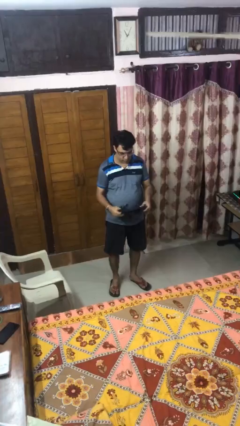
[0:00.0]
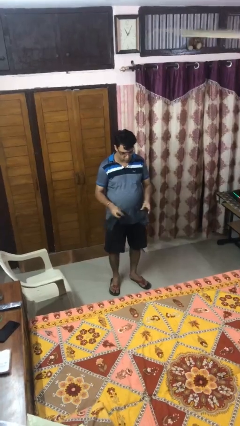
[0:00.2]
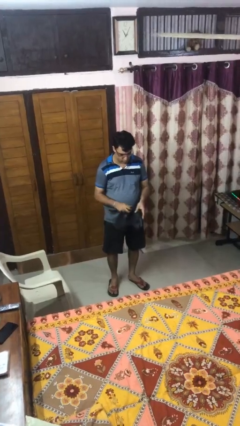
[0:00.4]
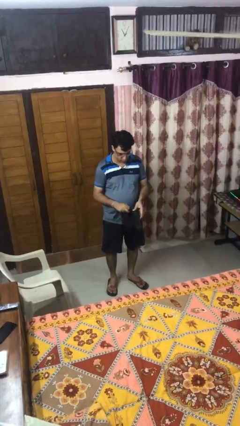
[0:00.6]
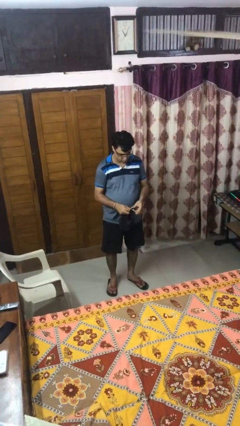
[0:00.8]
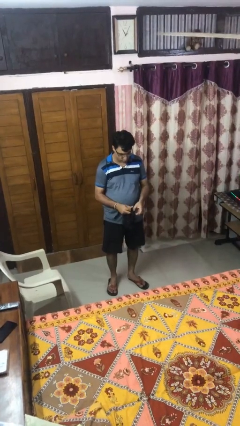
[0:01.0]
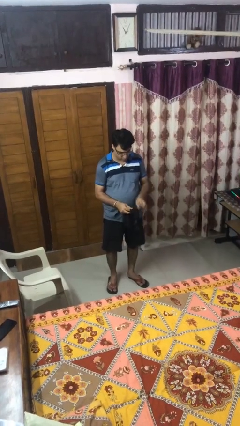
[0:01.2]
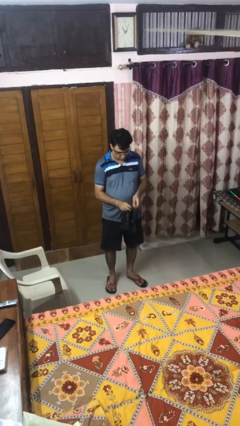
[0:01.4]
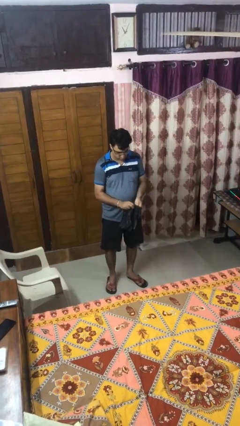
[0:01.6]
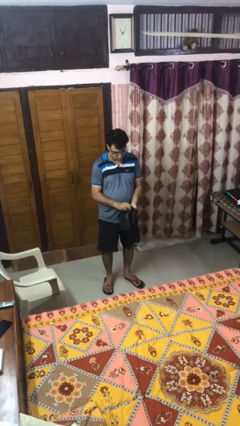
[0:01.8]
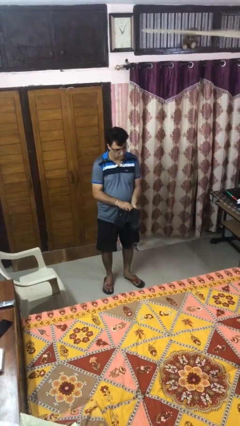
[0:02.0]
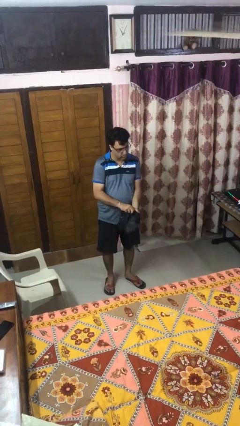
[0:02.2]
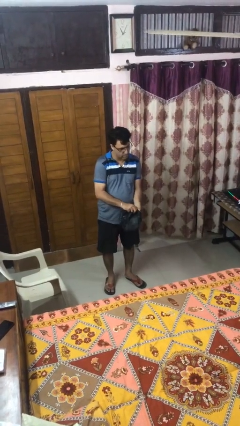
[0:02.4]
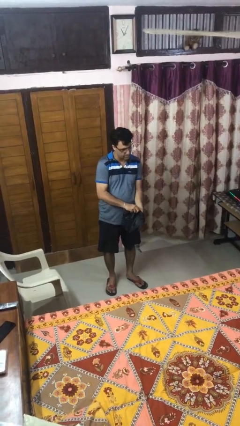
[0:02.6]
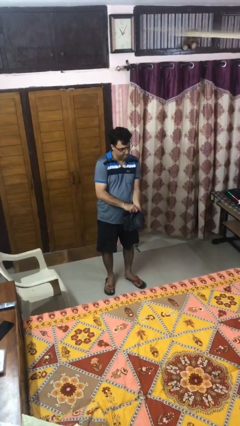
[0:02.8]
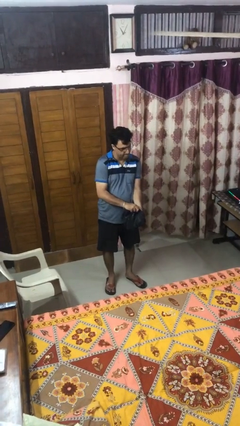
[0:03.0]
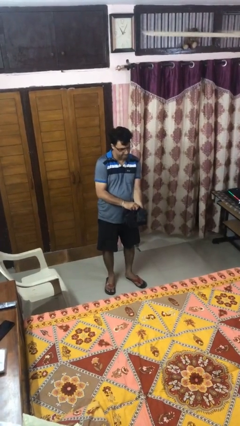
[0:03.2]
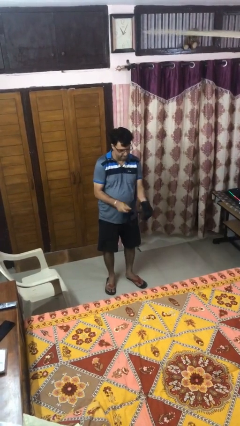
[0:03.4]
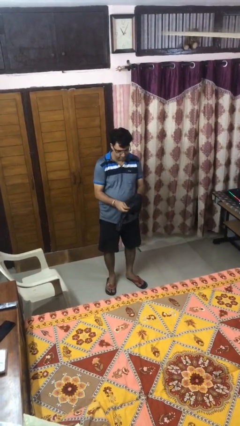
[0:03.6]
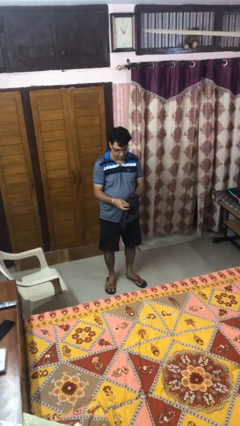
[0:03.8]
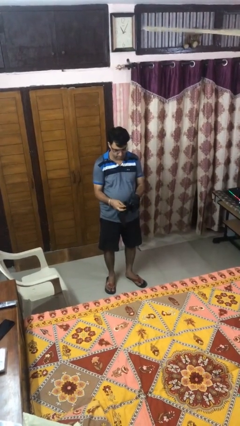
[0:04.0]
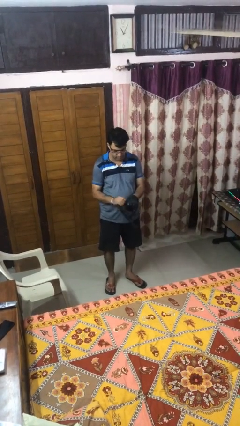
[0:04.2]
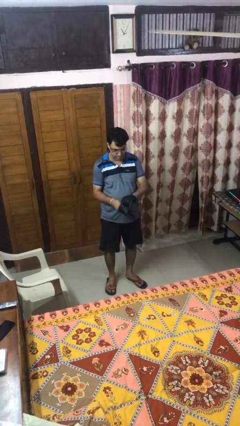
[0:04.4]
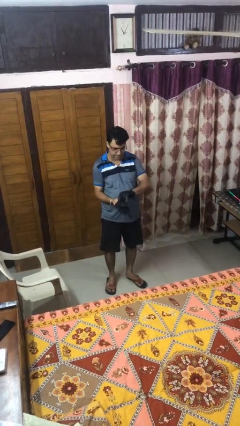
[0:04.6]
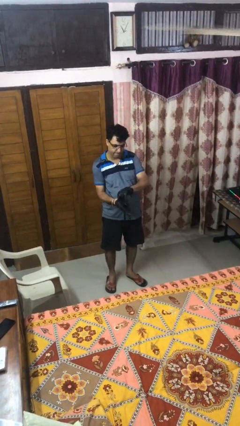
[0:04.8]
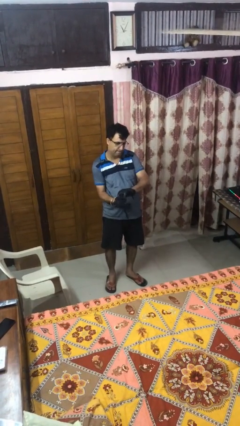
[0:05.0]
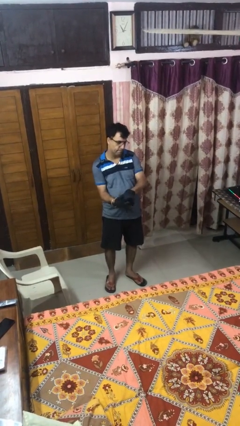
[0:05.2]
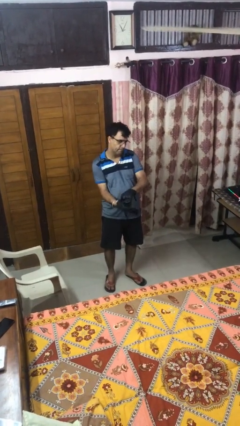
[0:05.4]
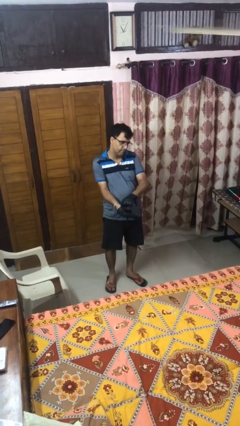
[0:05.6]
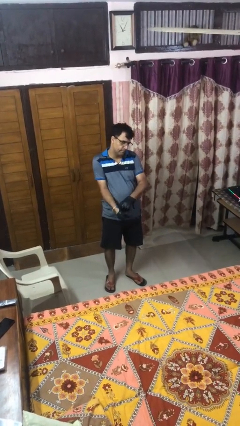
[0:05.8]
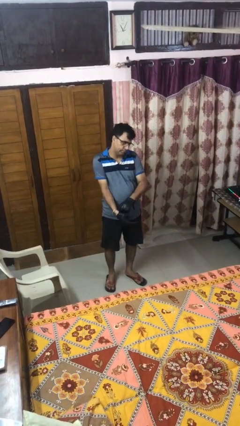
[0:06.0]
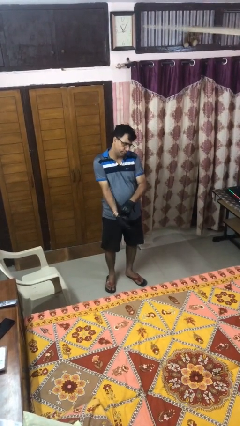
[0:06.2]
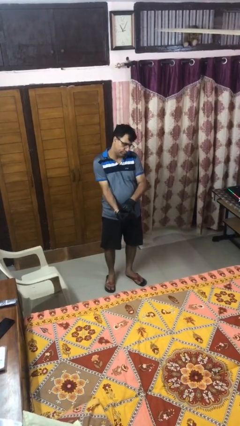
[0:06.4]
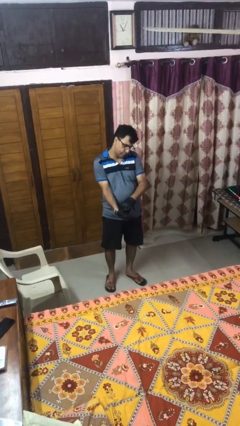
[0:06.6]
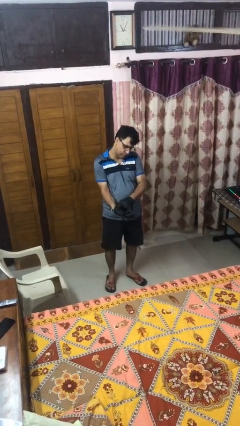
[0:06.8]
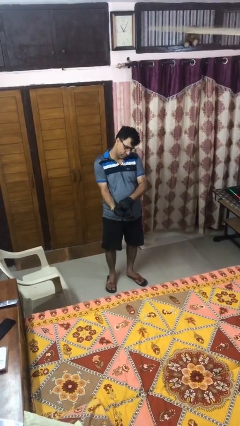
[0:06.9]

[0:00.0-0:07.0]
person puts on gloves

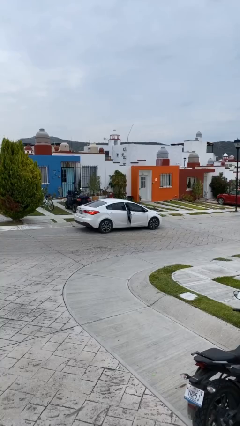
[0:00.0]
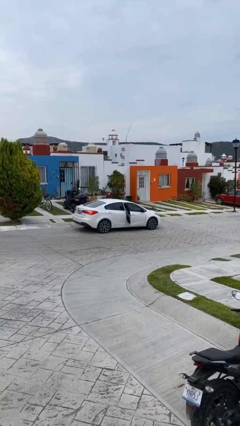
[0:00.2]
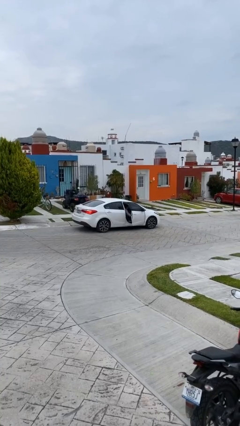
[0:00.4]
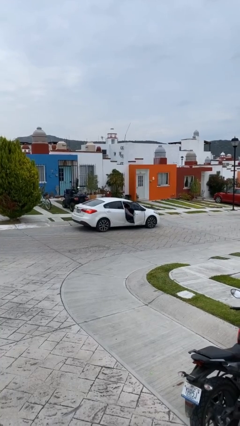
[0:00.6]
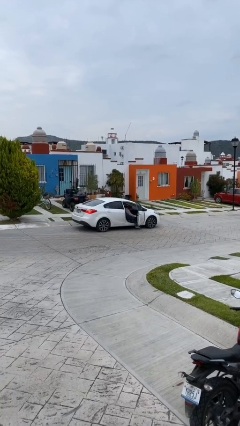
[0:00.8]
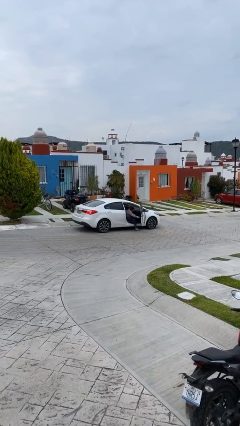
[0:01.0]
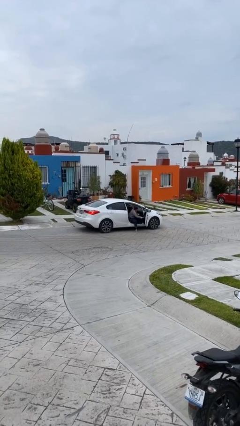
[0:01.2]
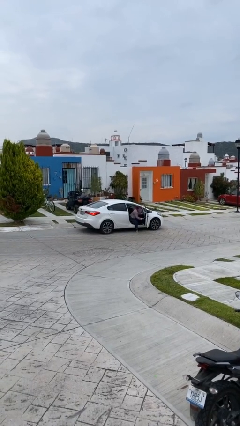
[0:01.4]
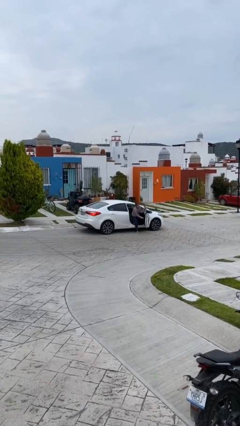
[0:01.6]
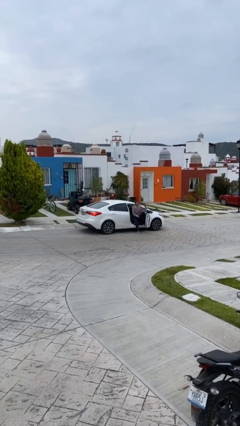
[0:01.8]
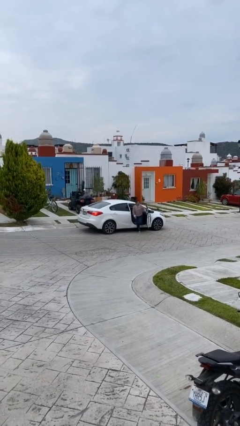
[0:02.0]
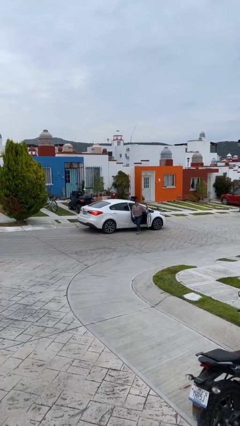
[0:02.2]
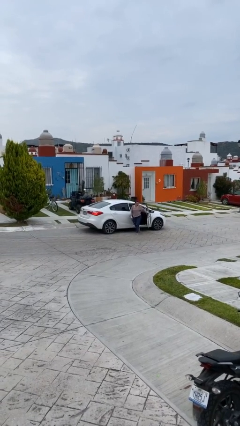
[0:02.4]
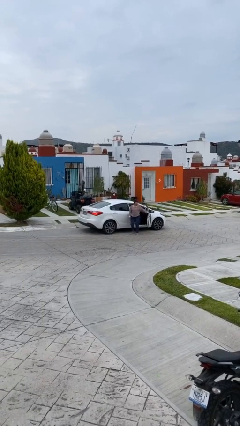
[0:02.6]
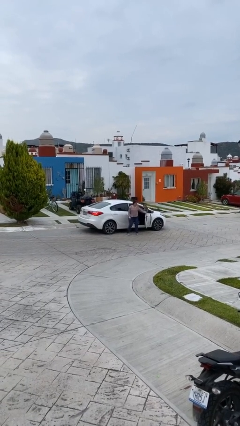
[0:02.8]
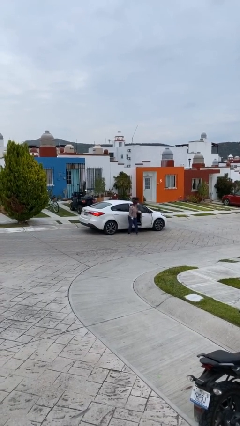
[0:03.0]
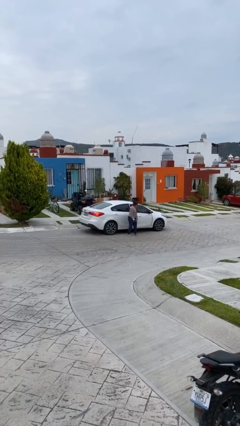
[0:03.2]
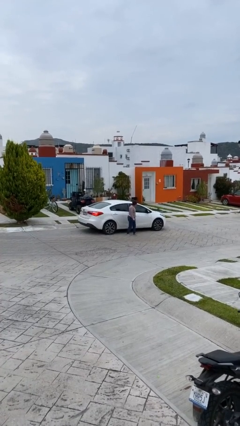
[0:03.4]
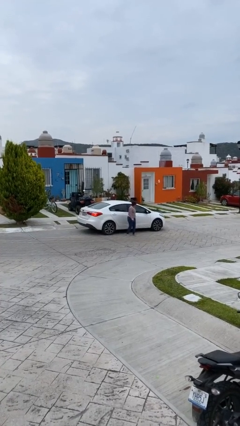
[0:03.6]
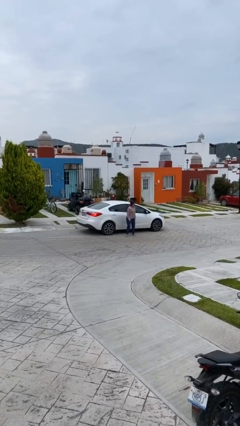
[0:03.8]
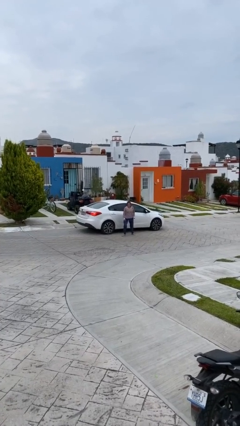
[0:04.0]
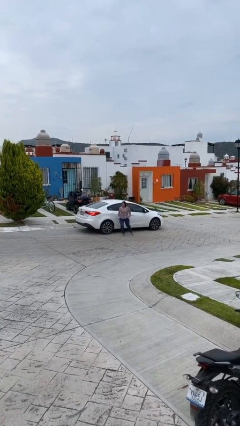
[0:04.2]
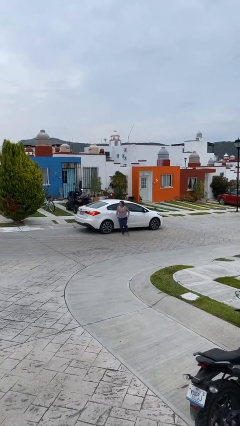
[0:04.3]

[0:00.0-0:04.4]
car drops off person

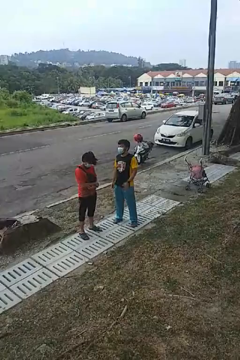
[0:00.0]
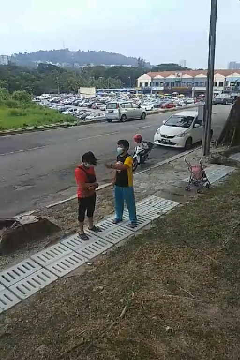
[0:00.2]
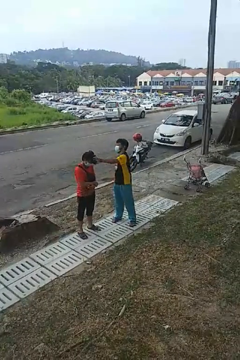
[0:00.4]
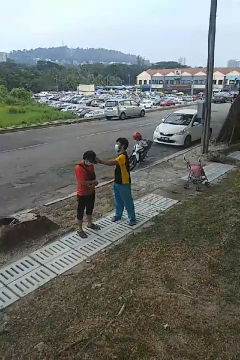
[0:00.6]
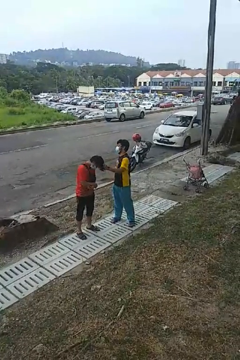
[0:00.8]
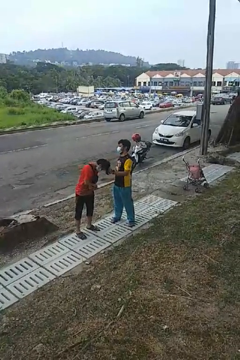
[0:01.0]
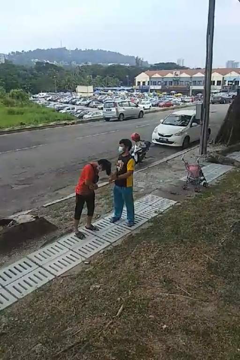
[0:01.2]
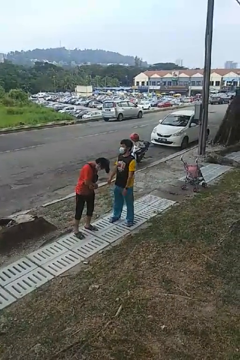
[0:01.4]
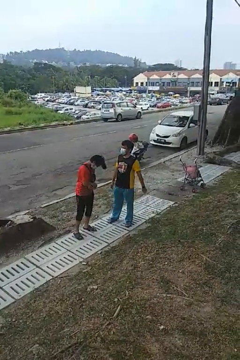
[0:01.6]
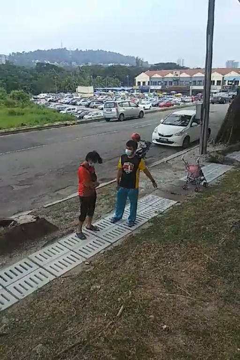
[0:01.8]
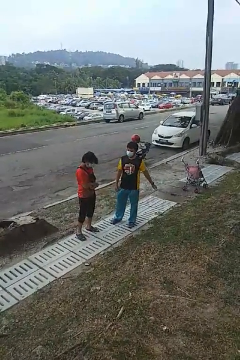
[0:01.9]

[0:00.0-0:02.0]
person grabs person by hair

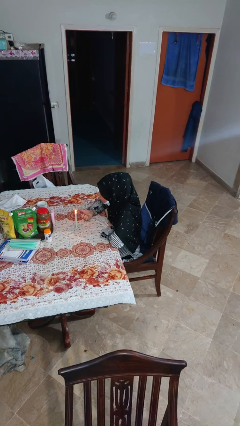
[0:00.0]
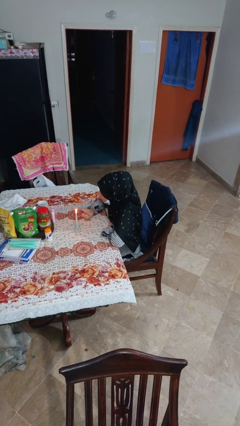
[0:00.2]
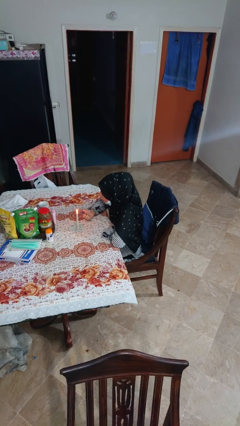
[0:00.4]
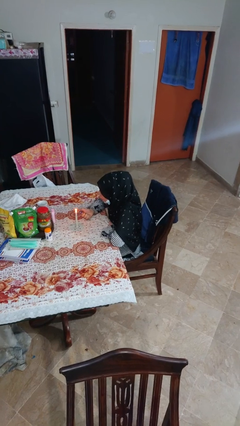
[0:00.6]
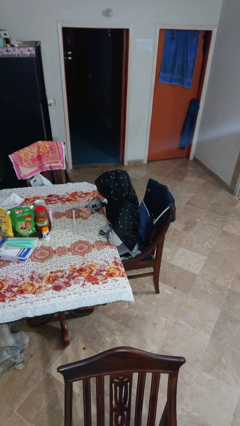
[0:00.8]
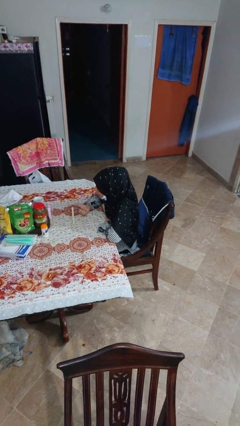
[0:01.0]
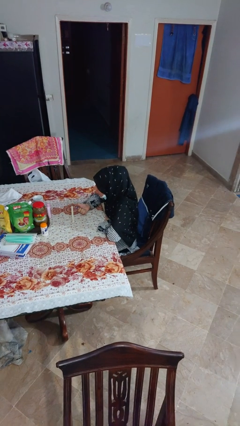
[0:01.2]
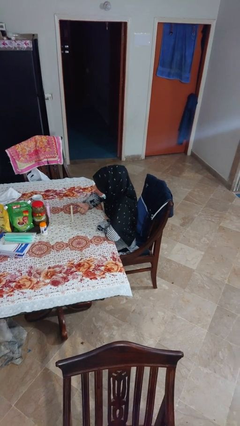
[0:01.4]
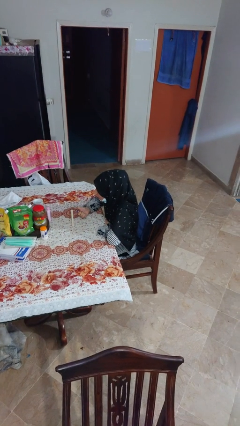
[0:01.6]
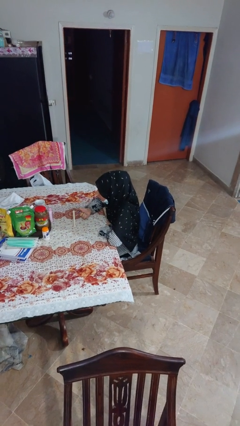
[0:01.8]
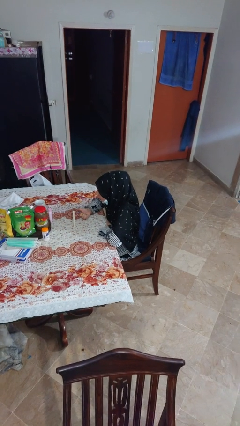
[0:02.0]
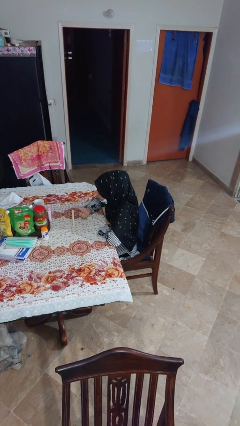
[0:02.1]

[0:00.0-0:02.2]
person extinguishes candle

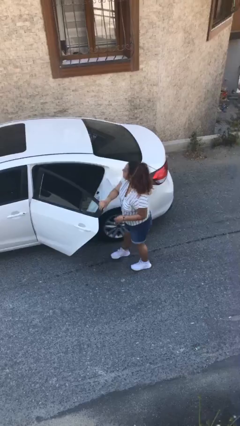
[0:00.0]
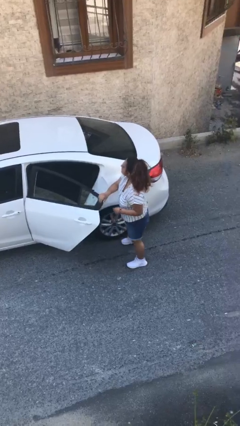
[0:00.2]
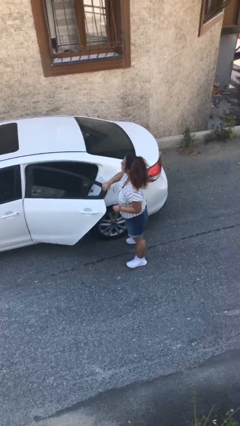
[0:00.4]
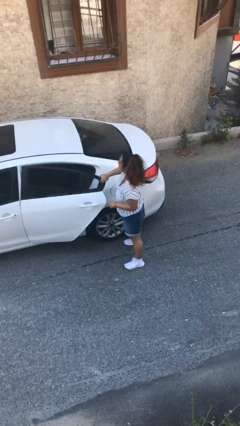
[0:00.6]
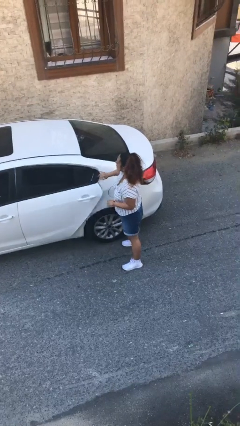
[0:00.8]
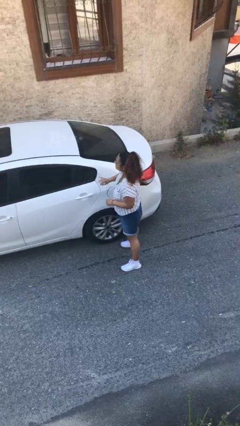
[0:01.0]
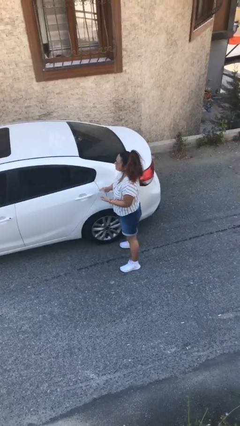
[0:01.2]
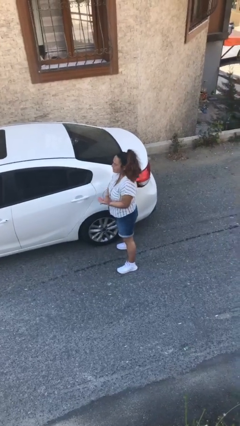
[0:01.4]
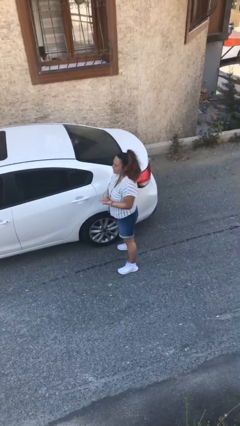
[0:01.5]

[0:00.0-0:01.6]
person closes car door

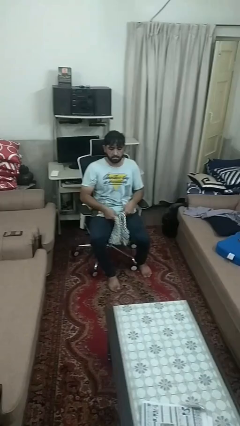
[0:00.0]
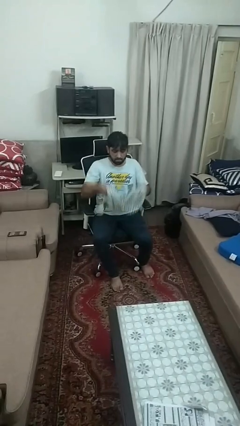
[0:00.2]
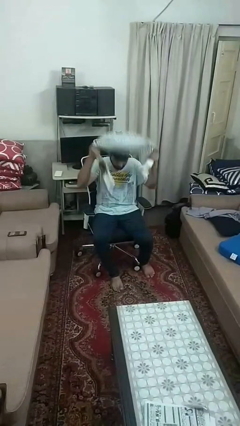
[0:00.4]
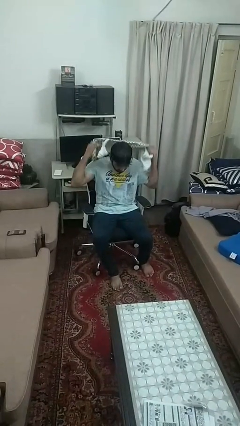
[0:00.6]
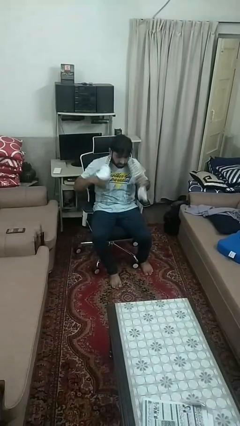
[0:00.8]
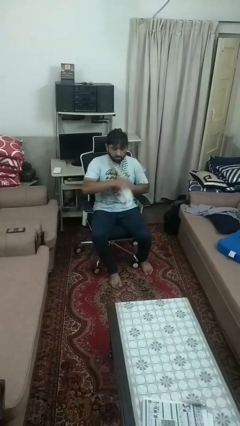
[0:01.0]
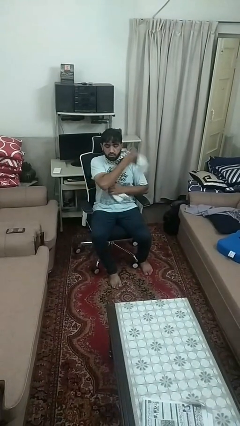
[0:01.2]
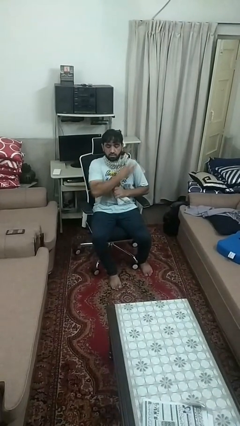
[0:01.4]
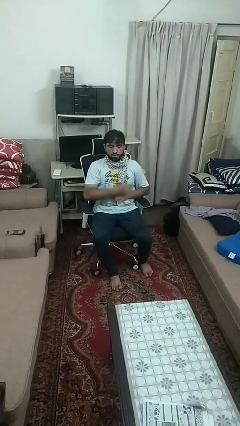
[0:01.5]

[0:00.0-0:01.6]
person puts on scarf
